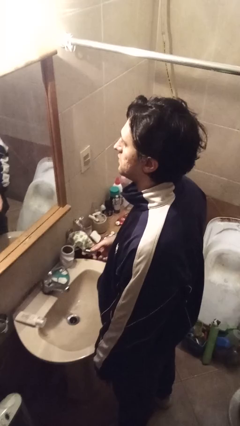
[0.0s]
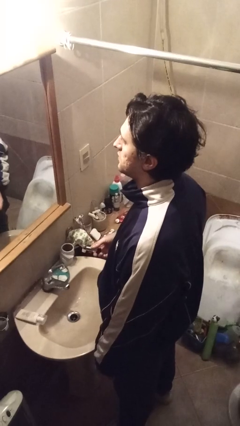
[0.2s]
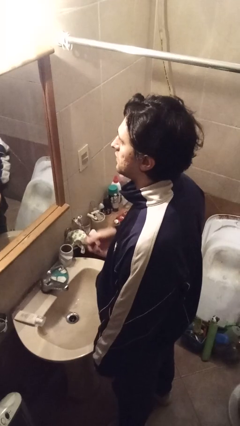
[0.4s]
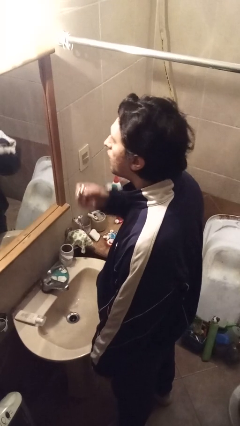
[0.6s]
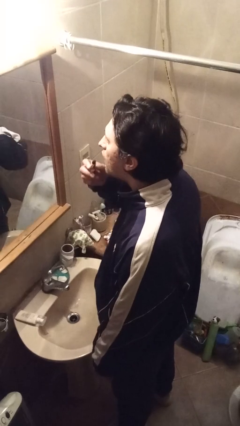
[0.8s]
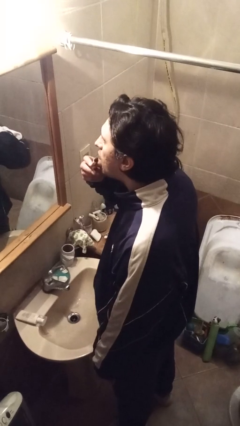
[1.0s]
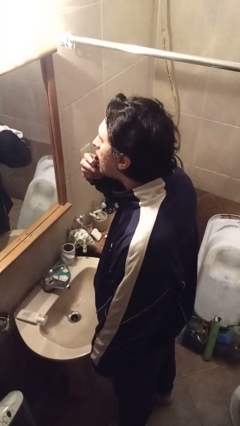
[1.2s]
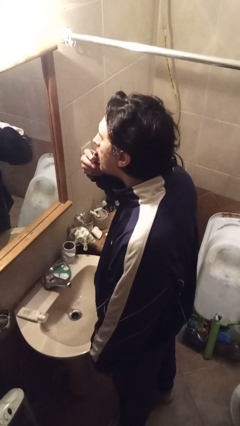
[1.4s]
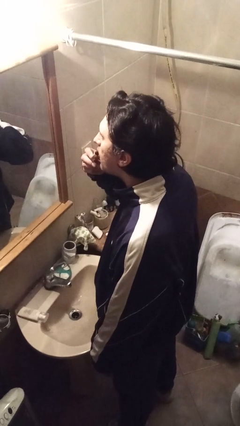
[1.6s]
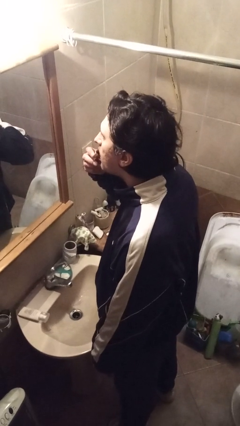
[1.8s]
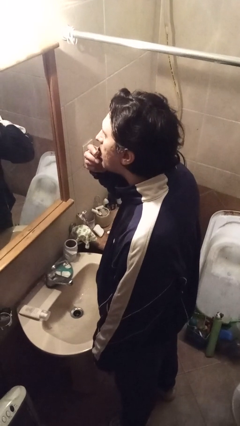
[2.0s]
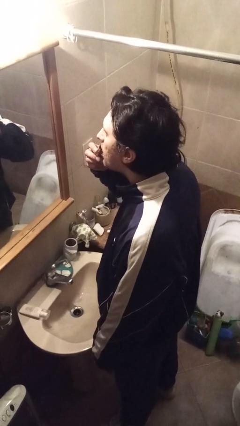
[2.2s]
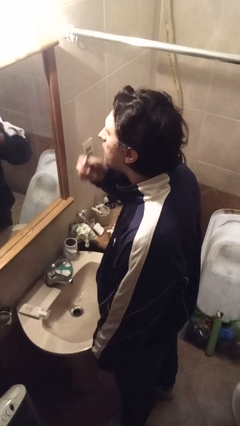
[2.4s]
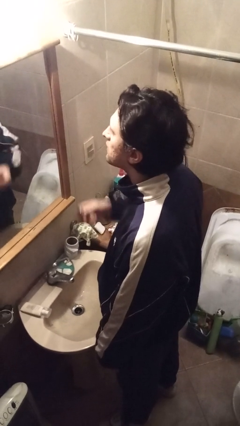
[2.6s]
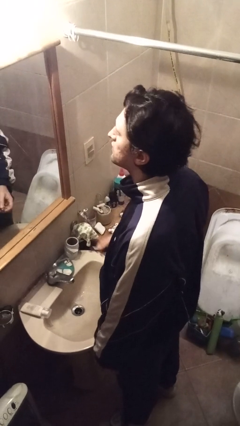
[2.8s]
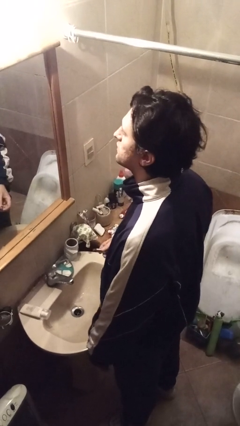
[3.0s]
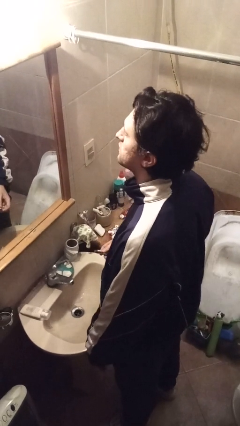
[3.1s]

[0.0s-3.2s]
person applies lip makeup

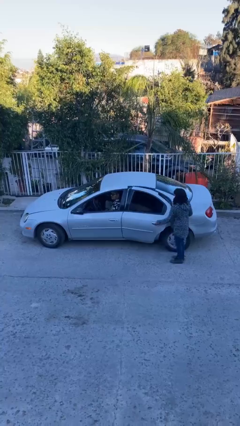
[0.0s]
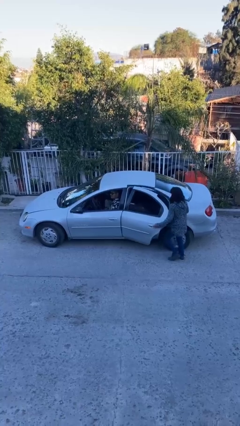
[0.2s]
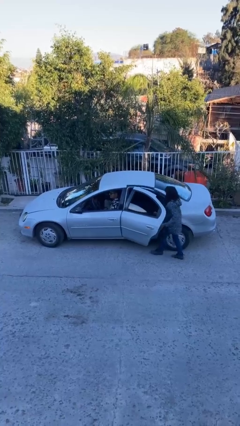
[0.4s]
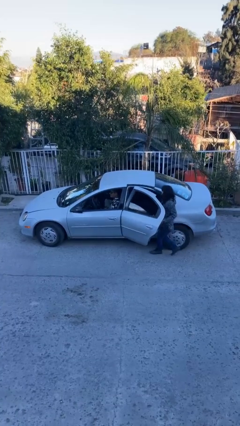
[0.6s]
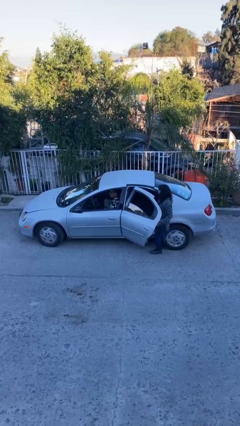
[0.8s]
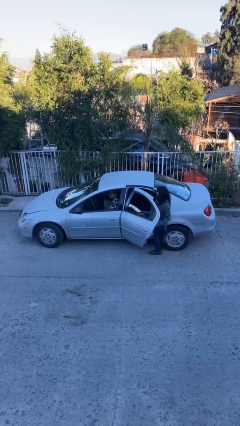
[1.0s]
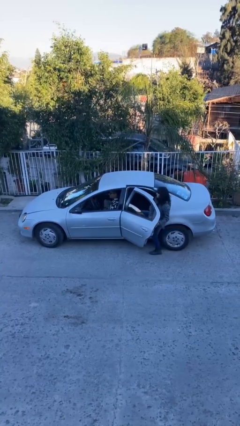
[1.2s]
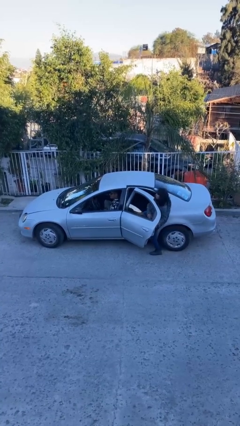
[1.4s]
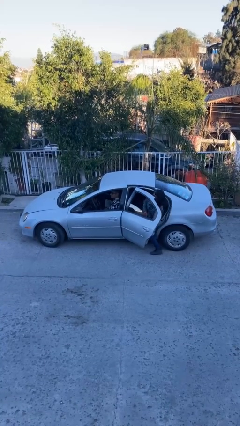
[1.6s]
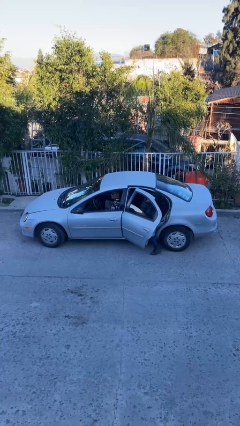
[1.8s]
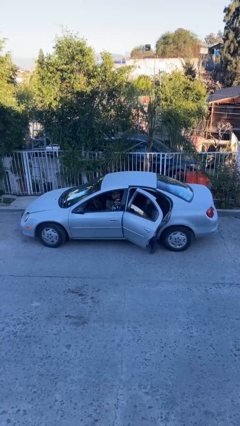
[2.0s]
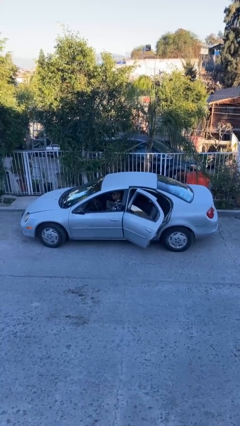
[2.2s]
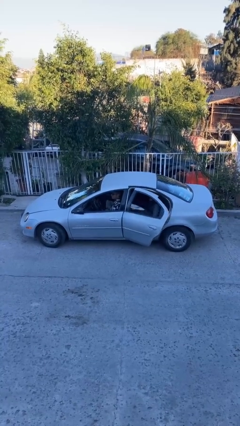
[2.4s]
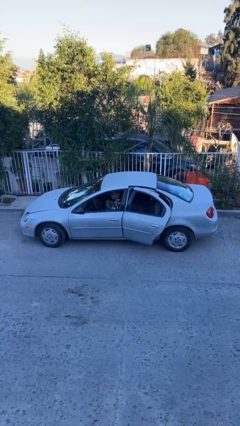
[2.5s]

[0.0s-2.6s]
car picks up person

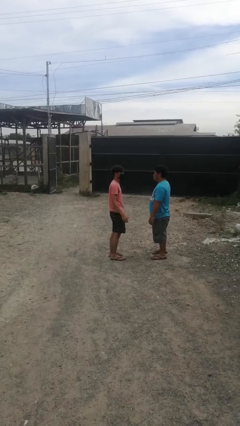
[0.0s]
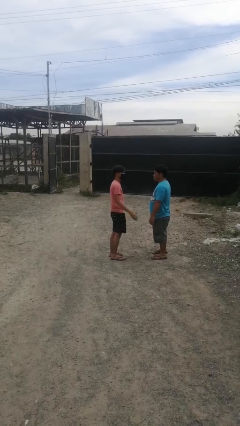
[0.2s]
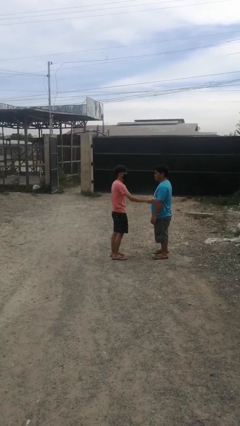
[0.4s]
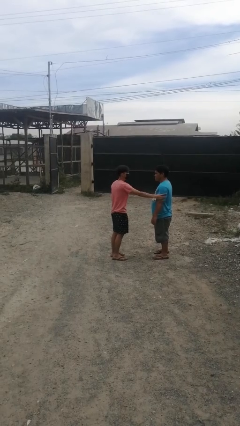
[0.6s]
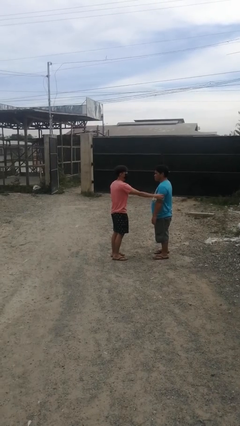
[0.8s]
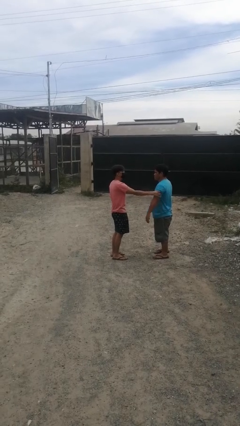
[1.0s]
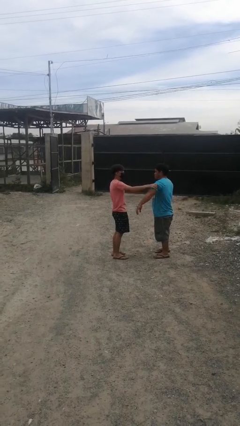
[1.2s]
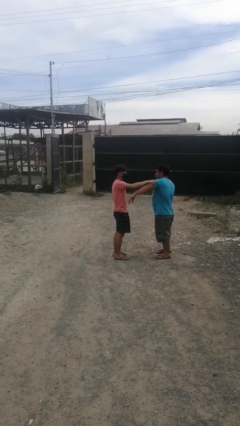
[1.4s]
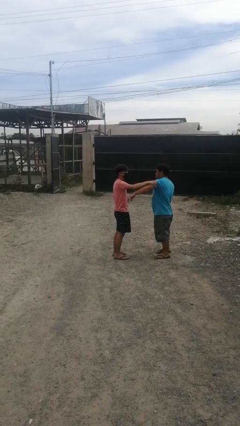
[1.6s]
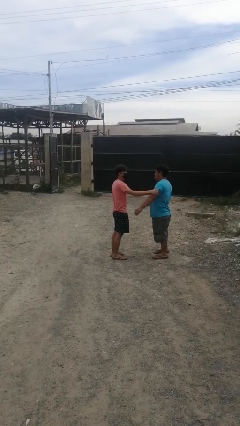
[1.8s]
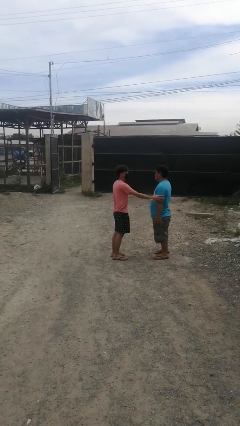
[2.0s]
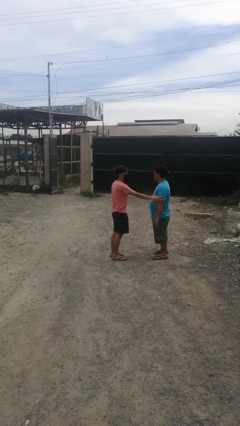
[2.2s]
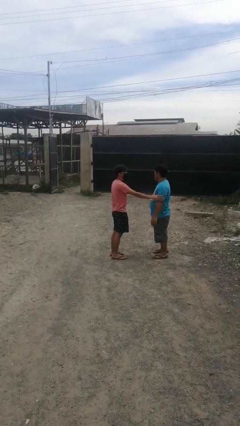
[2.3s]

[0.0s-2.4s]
person grabs person by bicep

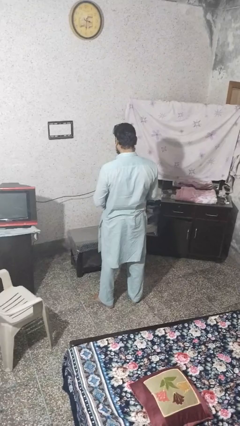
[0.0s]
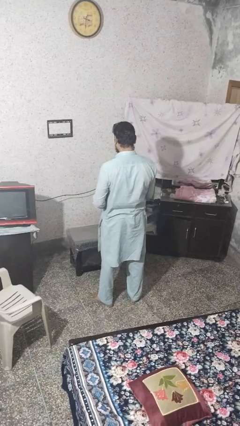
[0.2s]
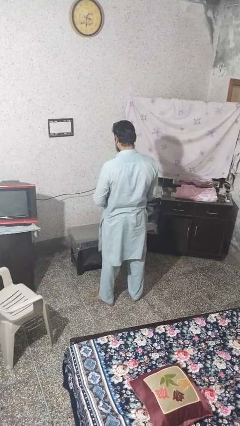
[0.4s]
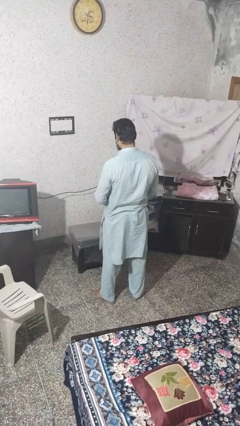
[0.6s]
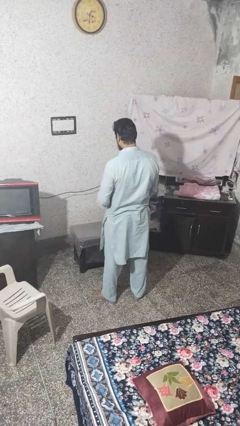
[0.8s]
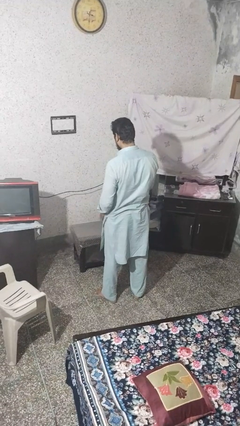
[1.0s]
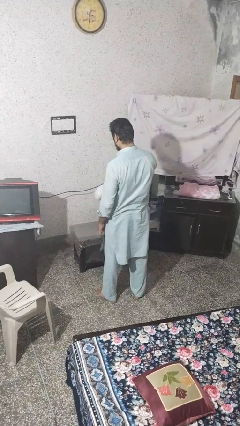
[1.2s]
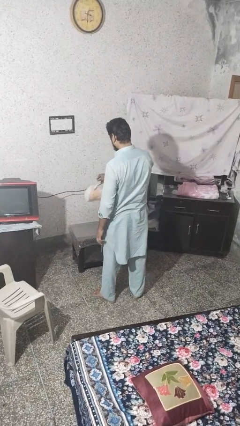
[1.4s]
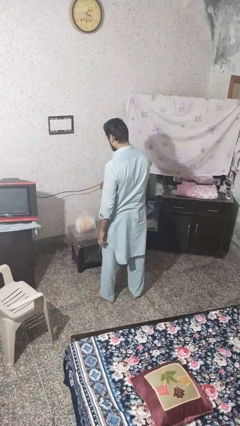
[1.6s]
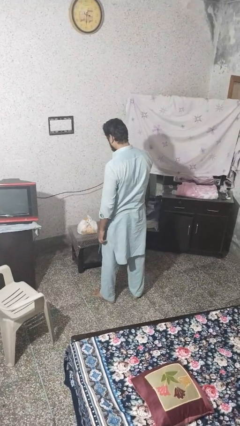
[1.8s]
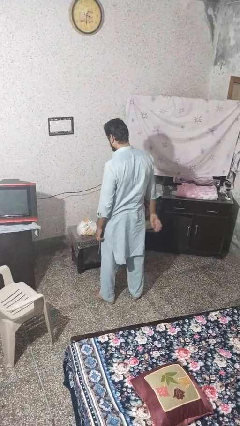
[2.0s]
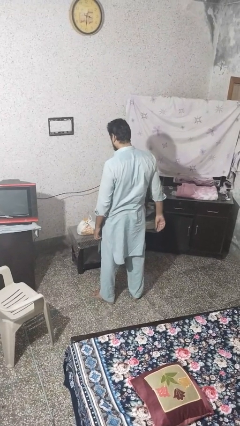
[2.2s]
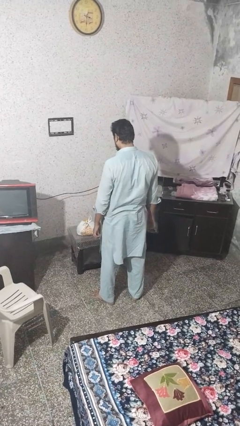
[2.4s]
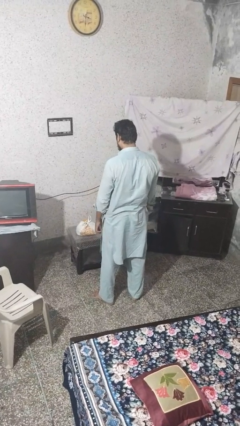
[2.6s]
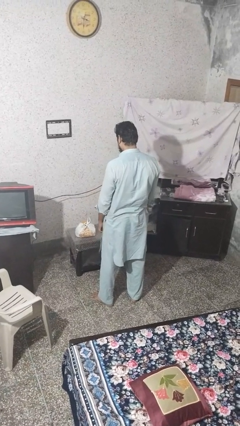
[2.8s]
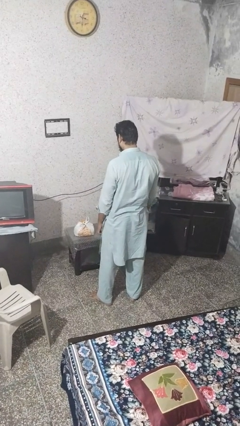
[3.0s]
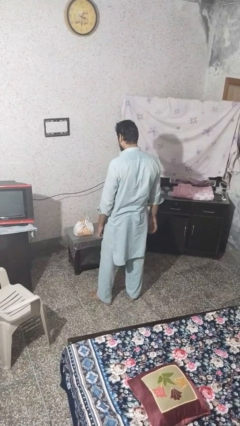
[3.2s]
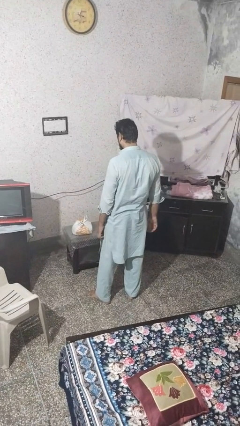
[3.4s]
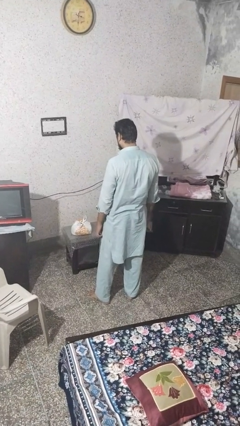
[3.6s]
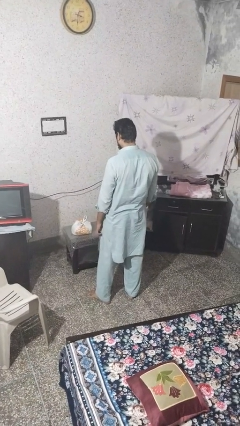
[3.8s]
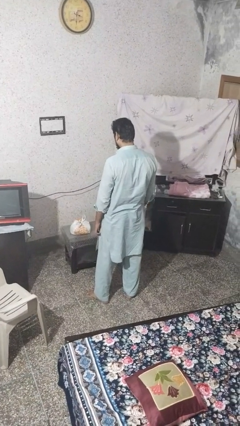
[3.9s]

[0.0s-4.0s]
person throws object on table

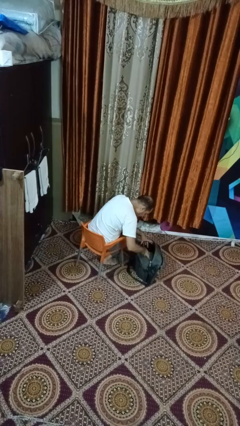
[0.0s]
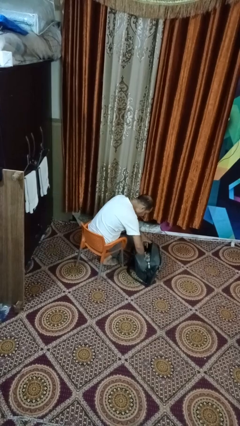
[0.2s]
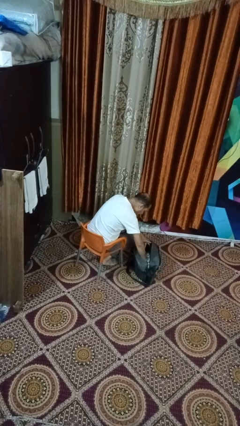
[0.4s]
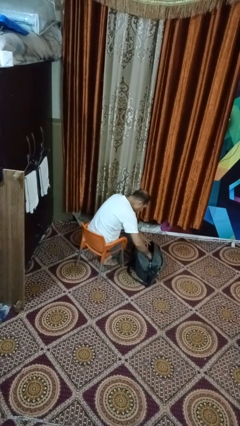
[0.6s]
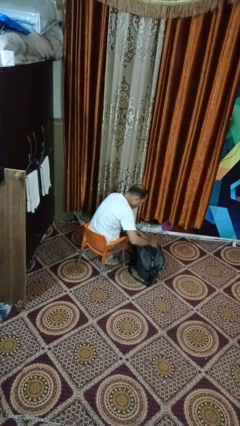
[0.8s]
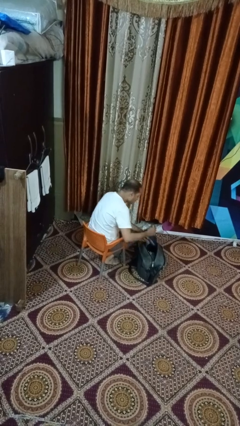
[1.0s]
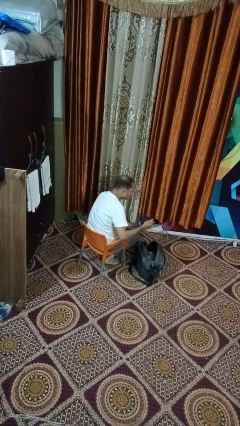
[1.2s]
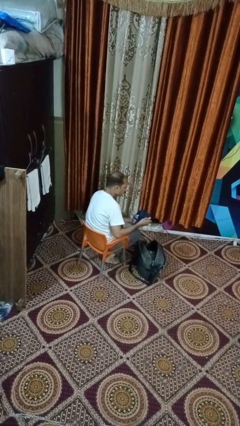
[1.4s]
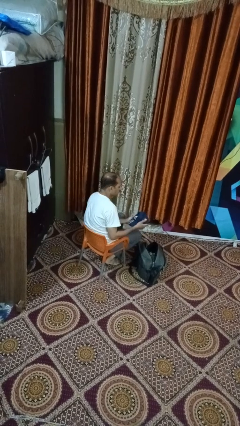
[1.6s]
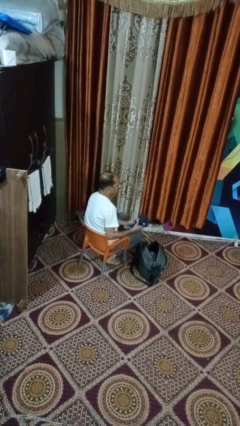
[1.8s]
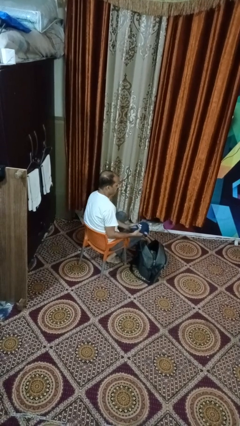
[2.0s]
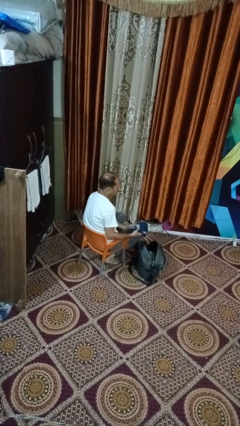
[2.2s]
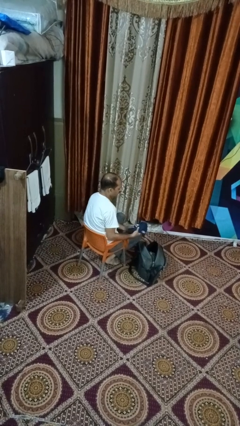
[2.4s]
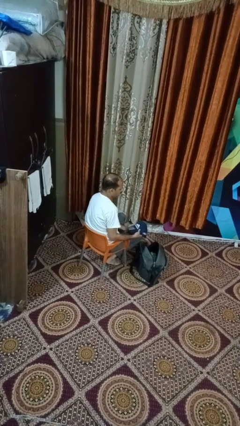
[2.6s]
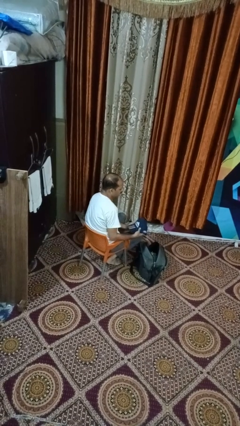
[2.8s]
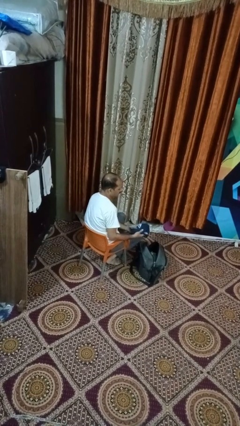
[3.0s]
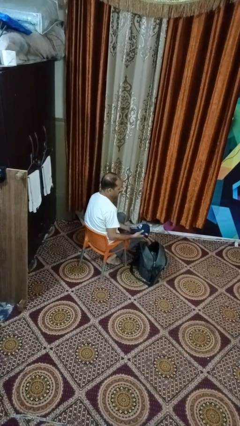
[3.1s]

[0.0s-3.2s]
person takes object from backpack

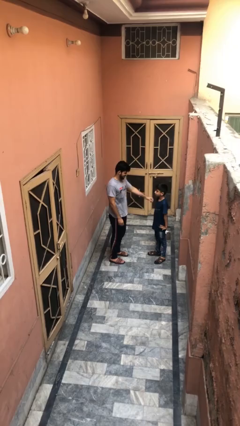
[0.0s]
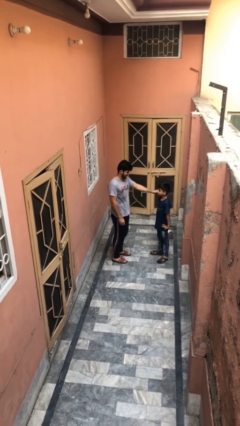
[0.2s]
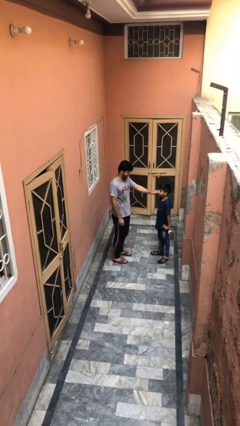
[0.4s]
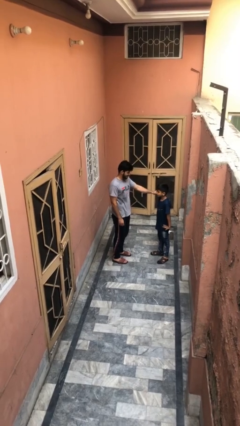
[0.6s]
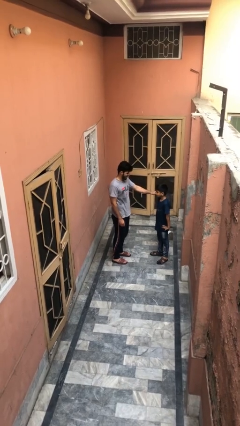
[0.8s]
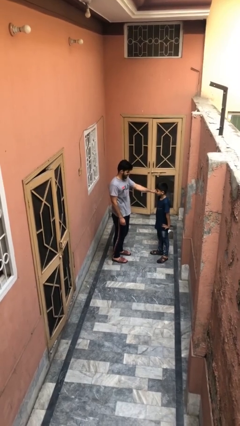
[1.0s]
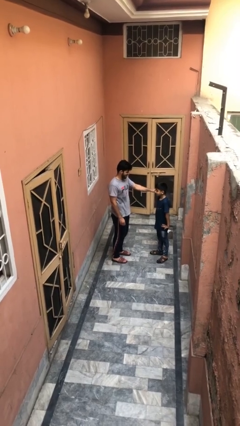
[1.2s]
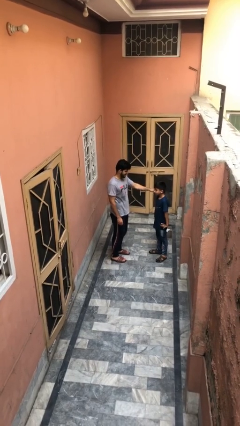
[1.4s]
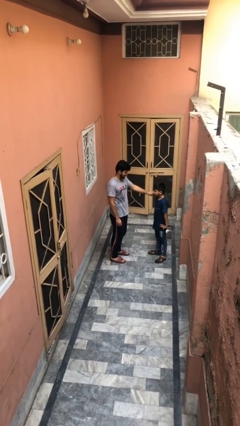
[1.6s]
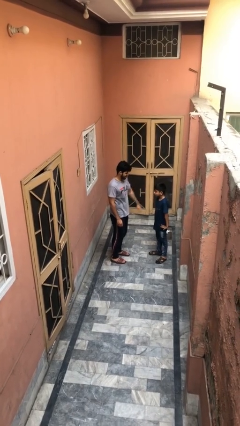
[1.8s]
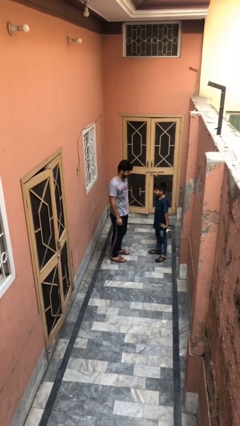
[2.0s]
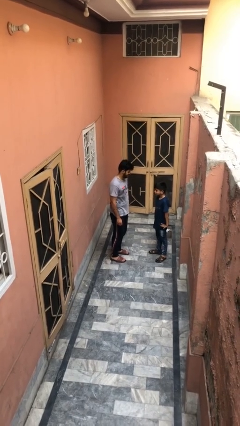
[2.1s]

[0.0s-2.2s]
person touches face of person
